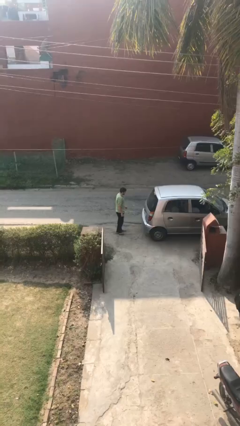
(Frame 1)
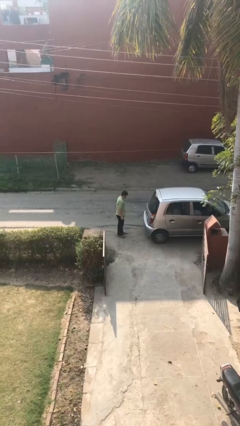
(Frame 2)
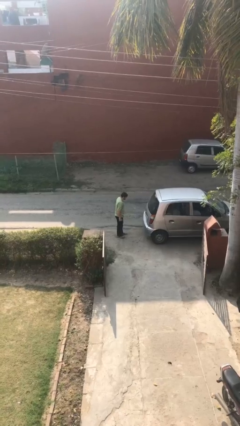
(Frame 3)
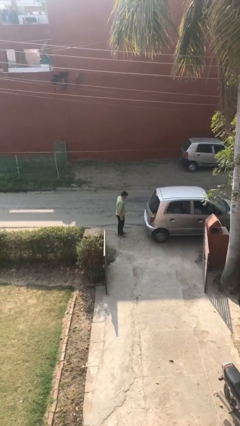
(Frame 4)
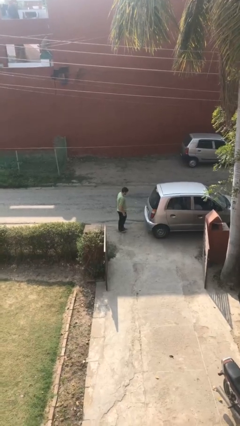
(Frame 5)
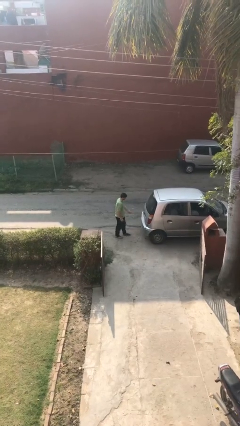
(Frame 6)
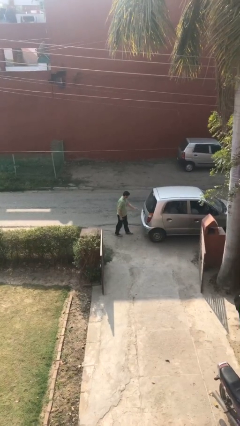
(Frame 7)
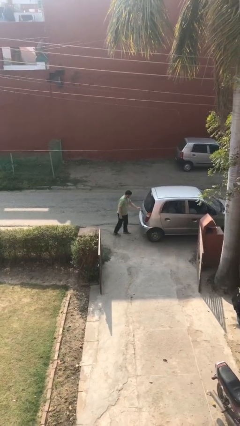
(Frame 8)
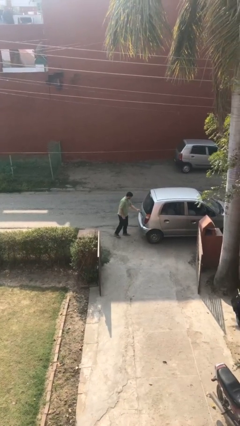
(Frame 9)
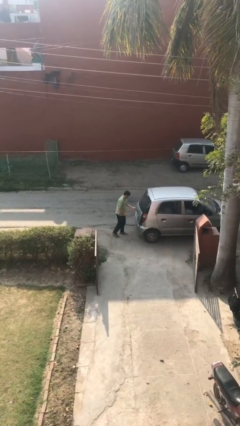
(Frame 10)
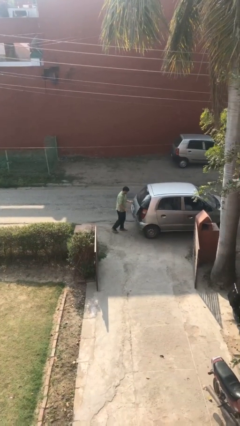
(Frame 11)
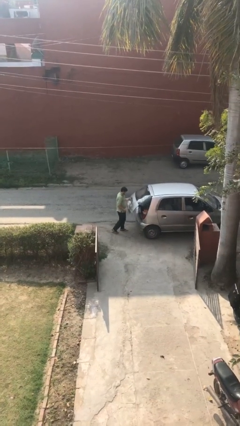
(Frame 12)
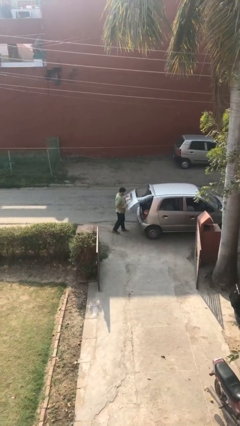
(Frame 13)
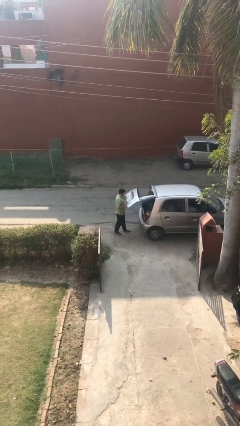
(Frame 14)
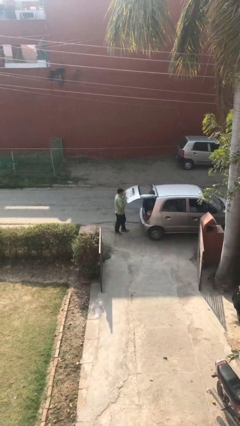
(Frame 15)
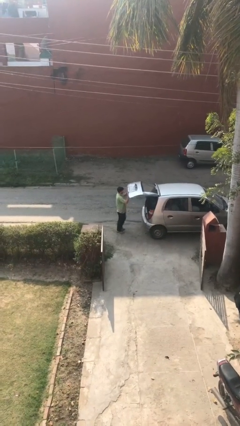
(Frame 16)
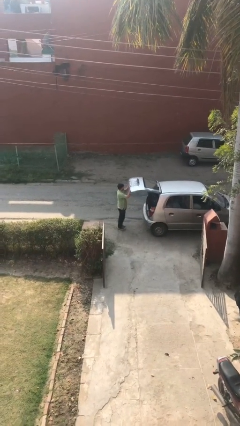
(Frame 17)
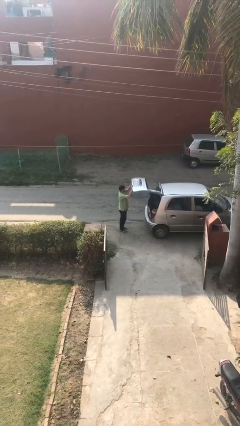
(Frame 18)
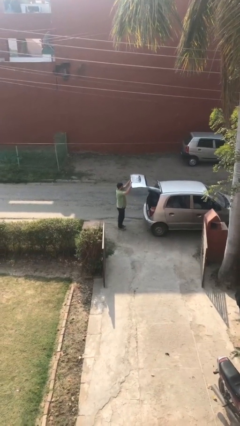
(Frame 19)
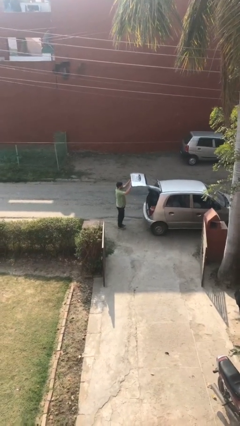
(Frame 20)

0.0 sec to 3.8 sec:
person opens car trunk

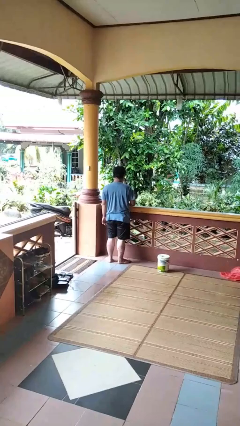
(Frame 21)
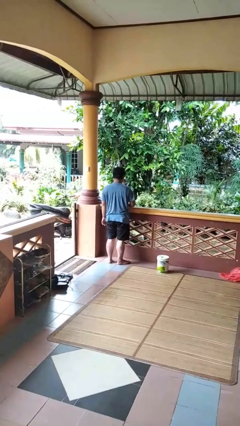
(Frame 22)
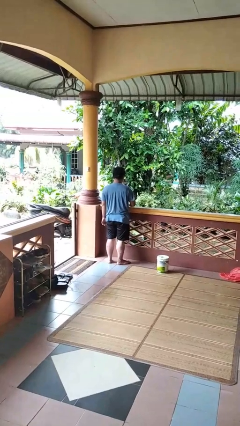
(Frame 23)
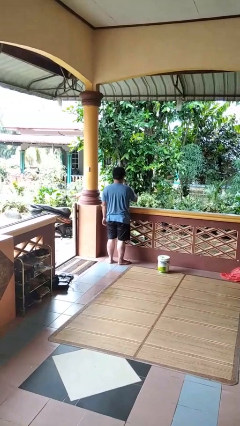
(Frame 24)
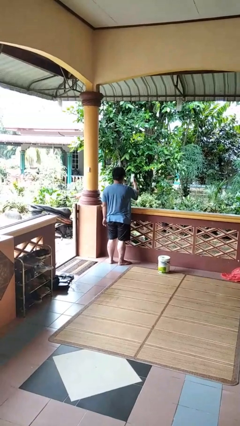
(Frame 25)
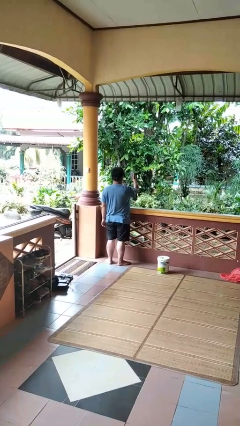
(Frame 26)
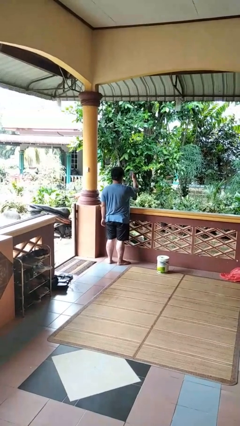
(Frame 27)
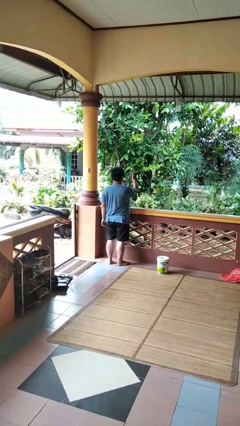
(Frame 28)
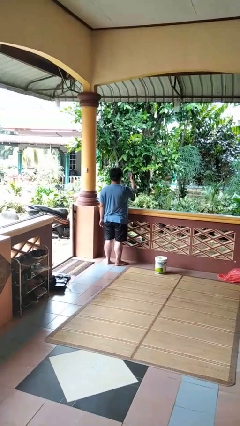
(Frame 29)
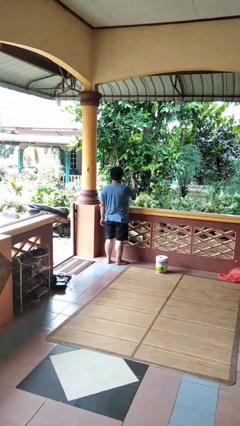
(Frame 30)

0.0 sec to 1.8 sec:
person takes selfie

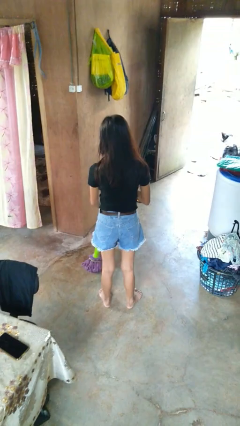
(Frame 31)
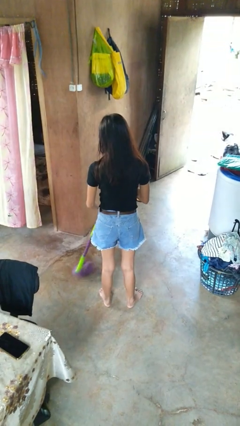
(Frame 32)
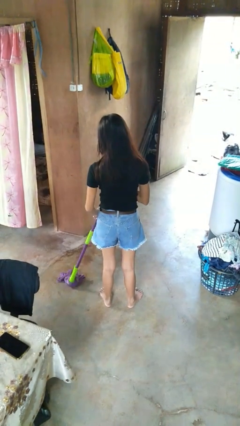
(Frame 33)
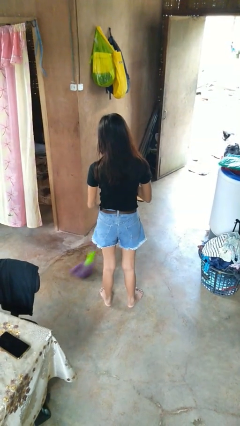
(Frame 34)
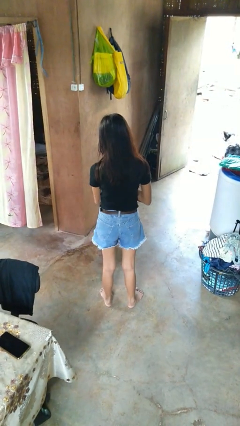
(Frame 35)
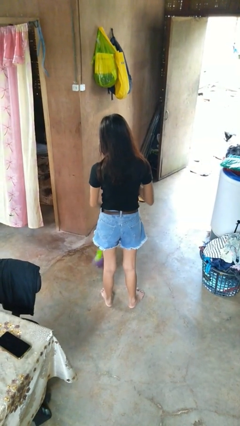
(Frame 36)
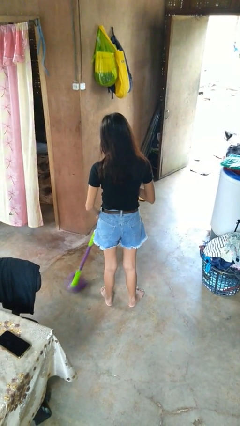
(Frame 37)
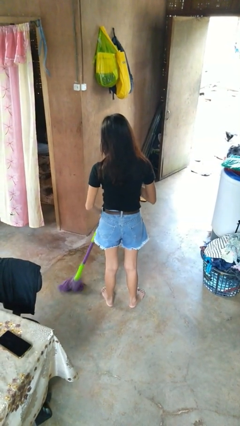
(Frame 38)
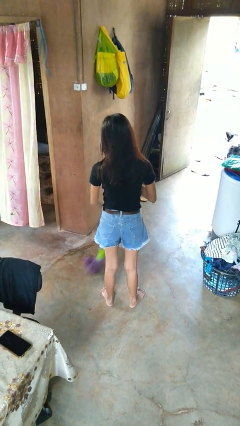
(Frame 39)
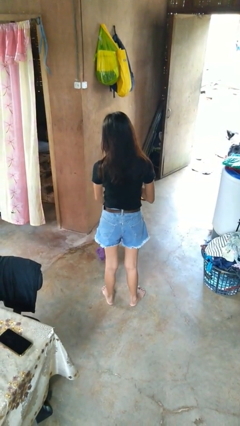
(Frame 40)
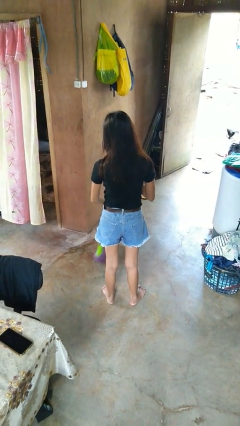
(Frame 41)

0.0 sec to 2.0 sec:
person mops

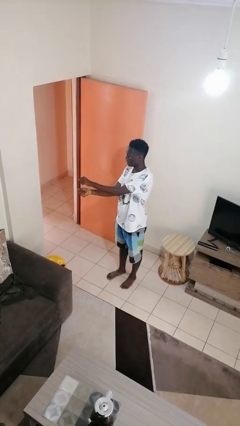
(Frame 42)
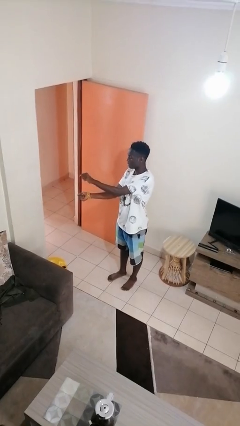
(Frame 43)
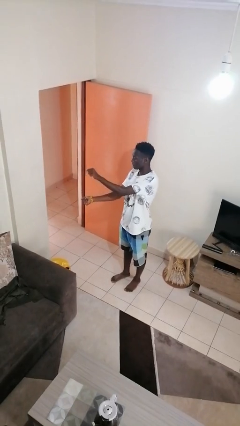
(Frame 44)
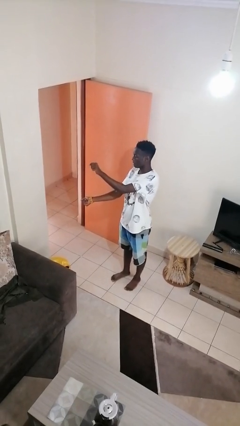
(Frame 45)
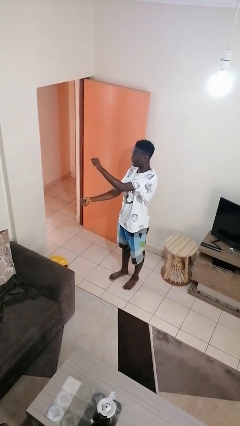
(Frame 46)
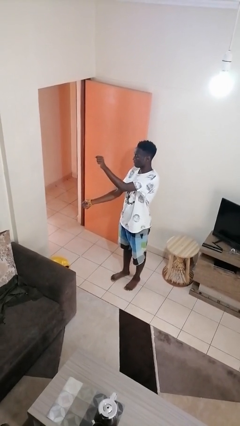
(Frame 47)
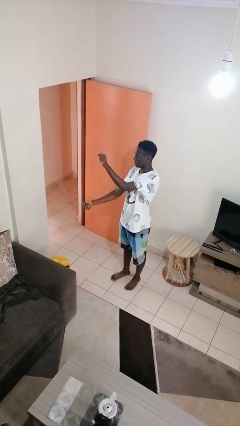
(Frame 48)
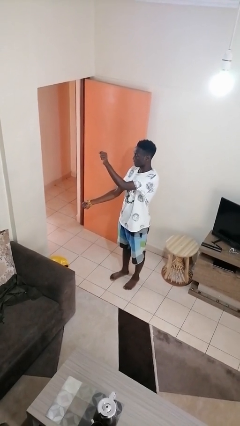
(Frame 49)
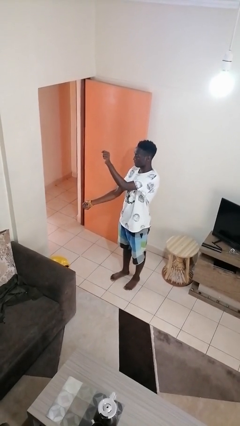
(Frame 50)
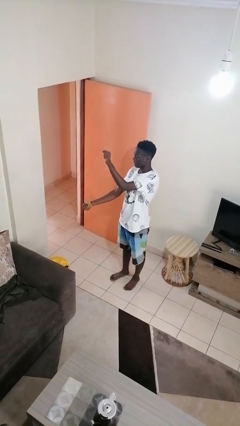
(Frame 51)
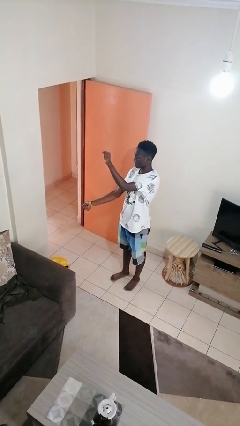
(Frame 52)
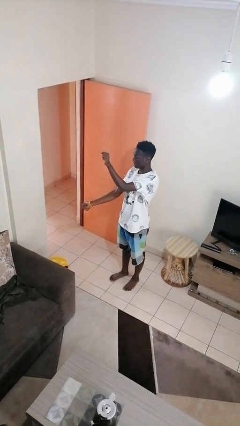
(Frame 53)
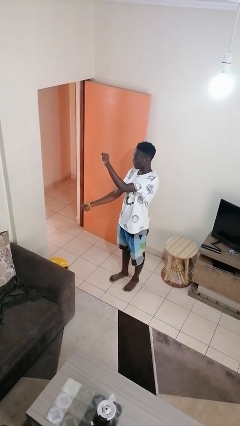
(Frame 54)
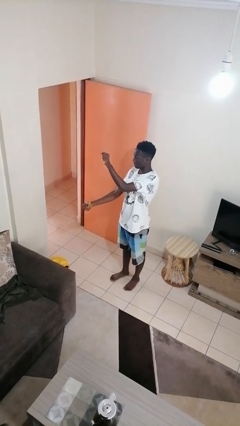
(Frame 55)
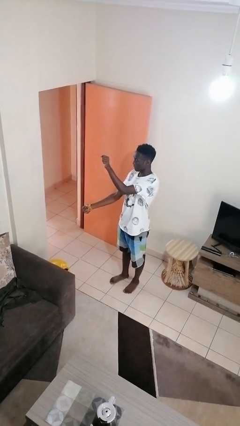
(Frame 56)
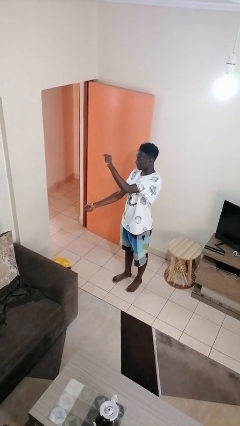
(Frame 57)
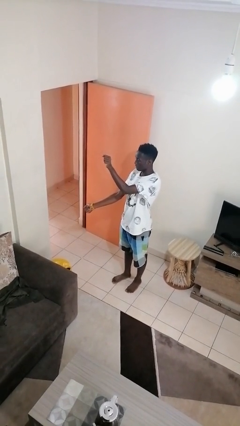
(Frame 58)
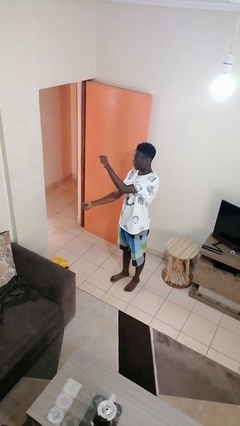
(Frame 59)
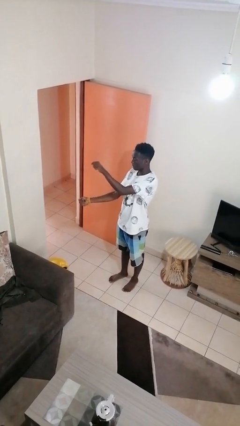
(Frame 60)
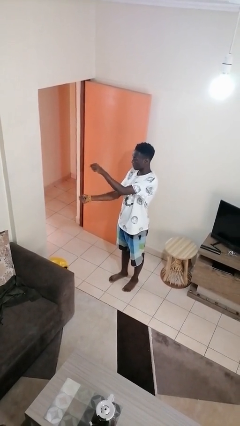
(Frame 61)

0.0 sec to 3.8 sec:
person gestures zoom in

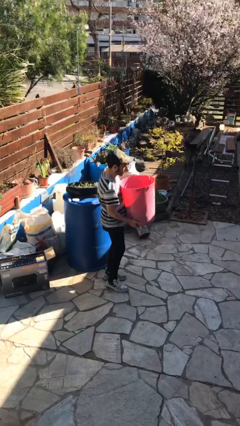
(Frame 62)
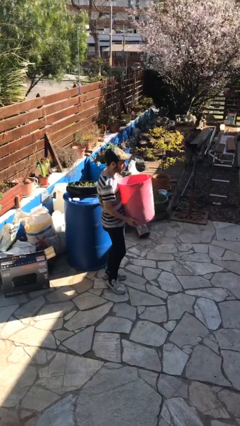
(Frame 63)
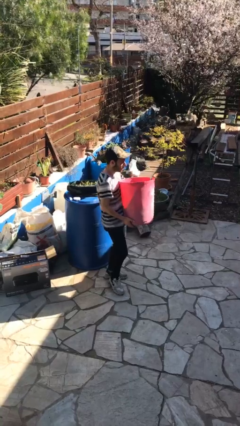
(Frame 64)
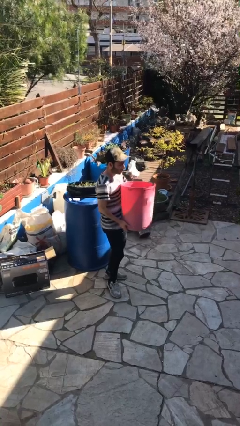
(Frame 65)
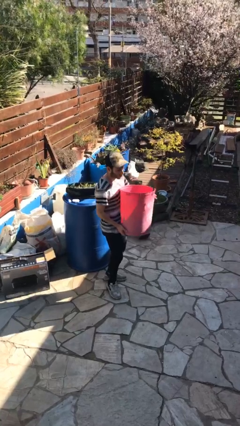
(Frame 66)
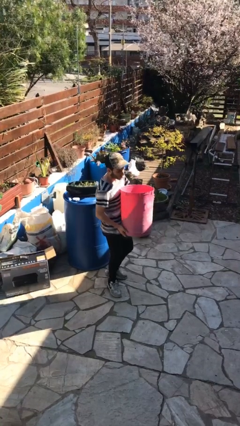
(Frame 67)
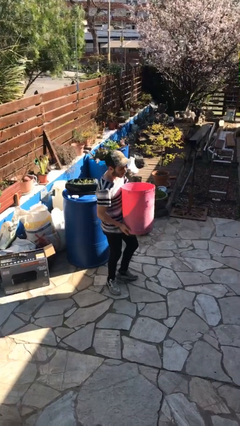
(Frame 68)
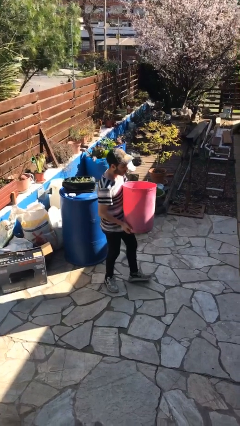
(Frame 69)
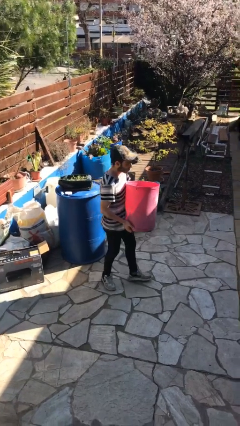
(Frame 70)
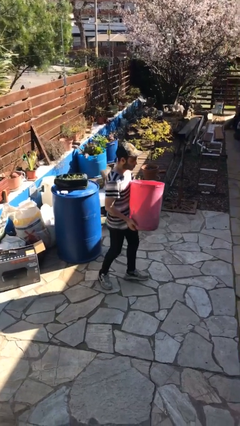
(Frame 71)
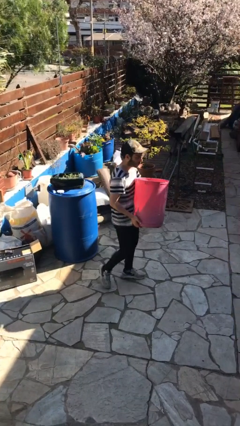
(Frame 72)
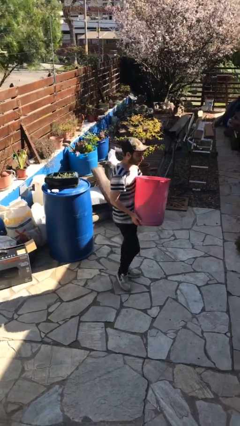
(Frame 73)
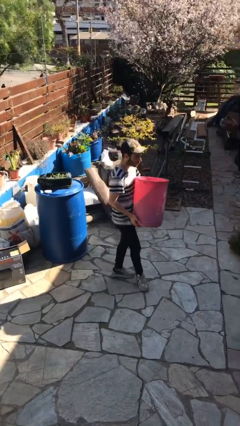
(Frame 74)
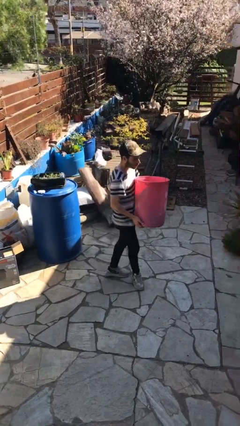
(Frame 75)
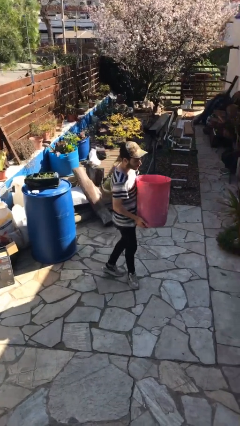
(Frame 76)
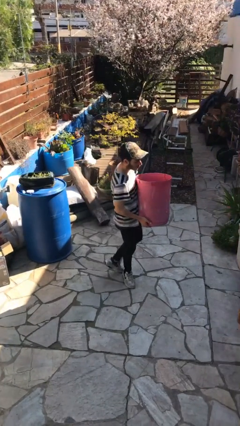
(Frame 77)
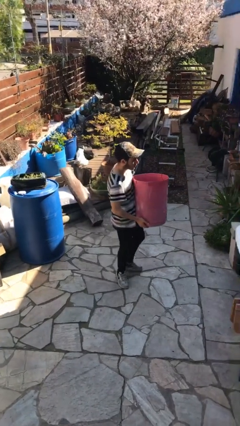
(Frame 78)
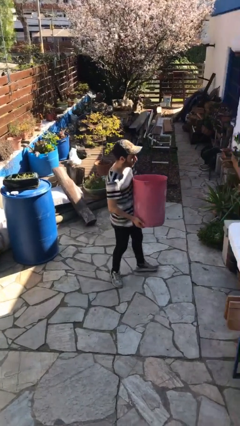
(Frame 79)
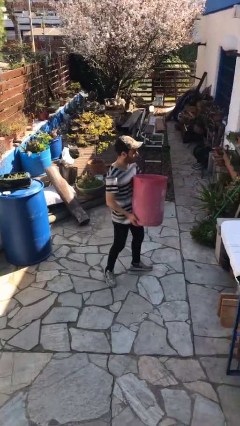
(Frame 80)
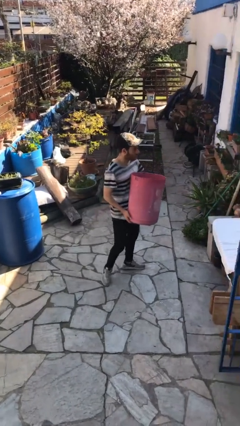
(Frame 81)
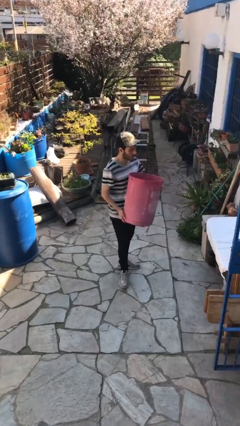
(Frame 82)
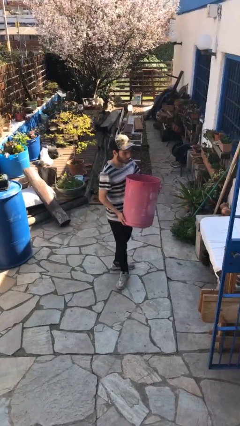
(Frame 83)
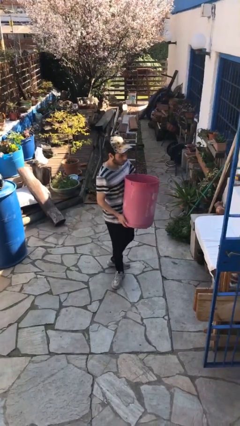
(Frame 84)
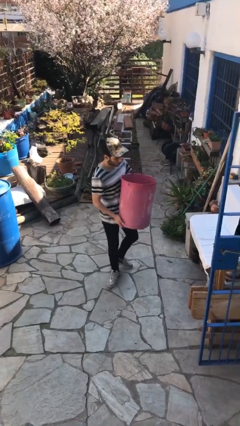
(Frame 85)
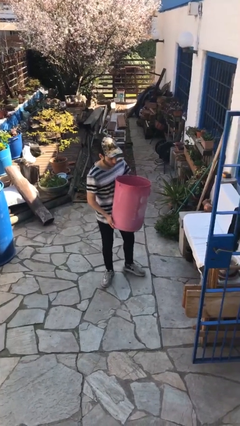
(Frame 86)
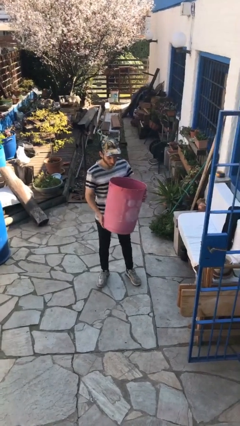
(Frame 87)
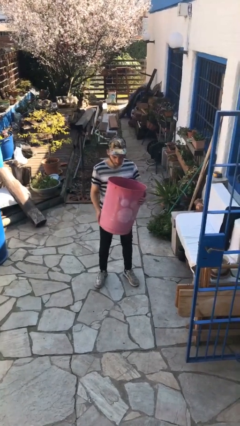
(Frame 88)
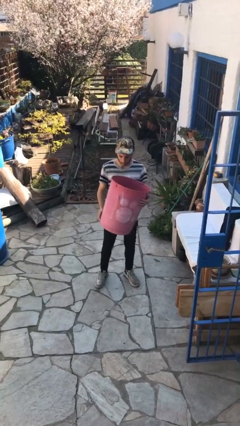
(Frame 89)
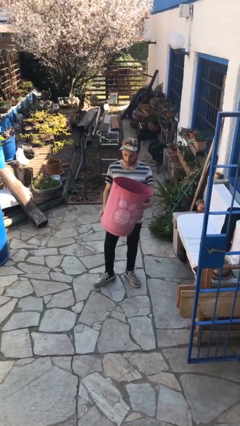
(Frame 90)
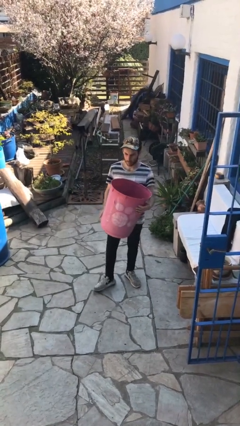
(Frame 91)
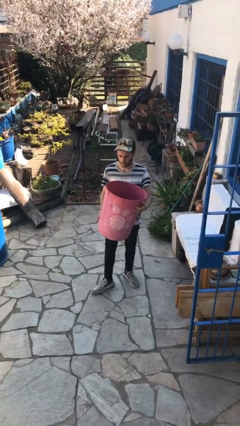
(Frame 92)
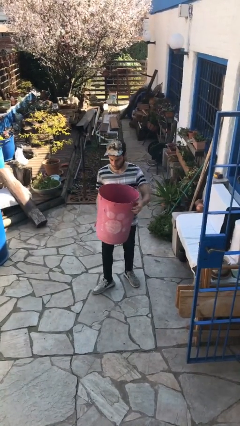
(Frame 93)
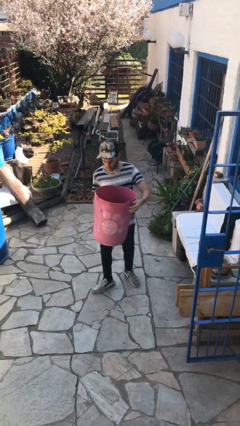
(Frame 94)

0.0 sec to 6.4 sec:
person carries heavy object
